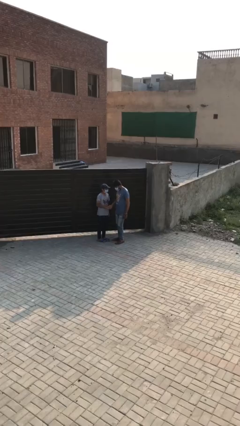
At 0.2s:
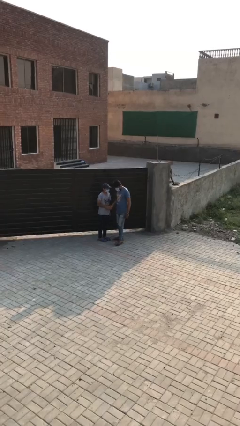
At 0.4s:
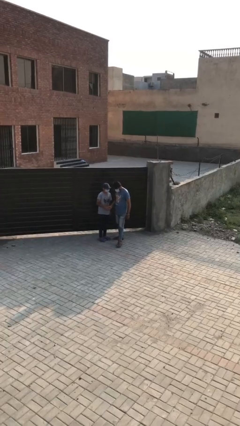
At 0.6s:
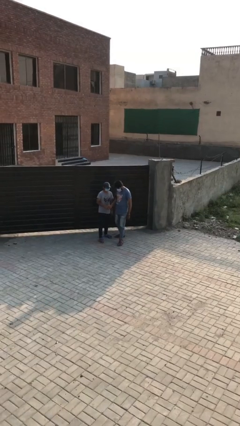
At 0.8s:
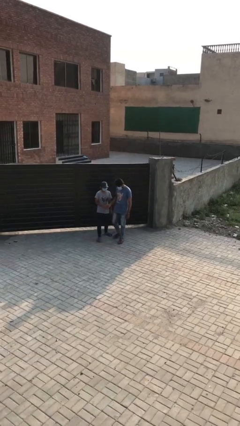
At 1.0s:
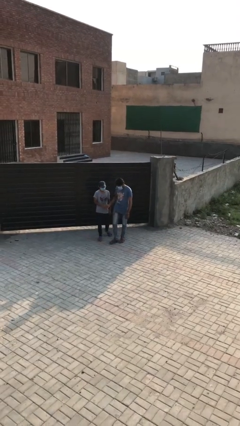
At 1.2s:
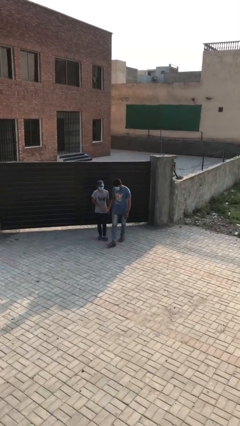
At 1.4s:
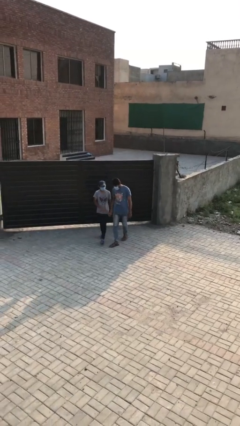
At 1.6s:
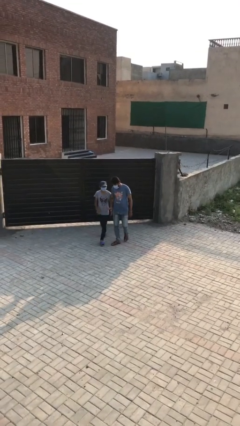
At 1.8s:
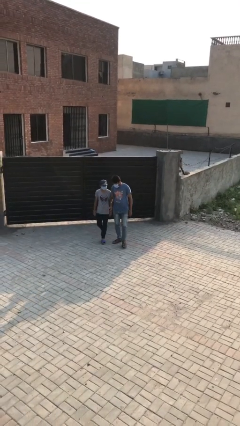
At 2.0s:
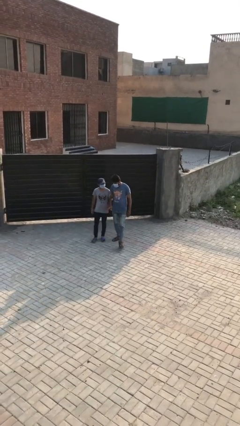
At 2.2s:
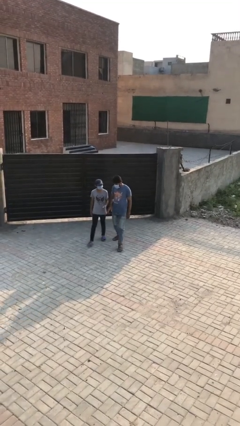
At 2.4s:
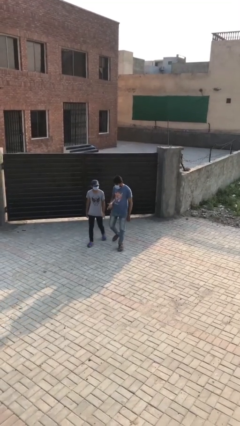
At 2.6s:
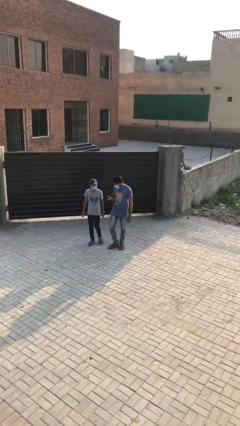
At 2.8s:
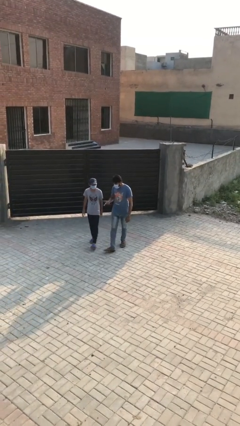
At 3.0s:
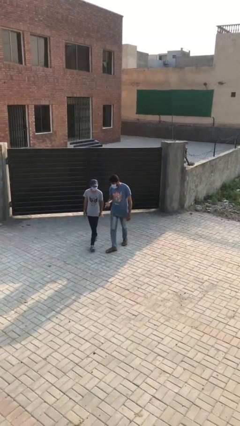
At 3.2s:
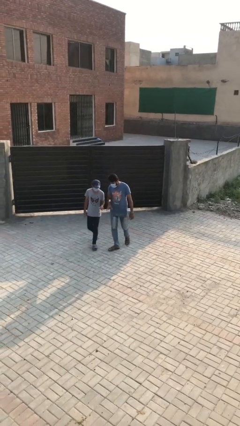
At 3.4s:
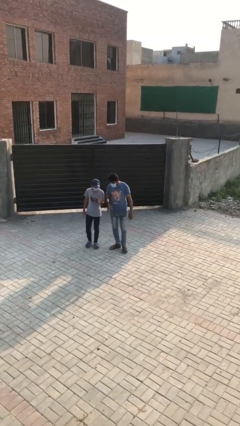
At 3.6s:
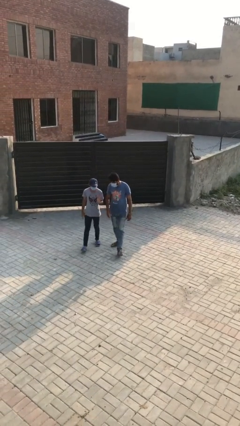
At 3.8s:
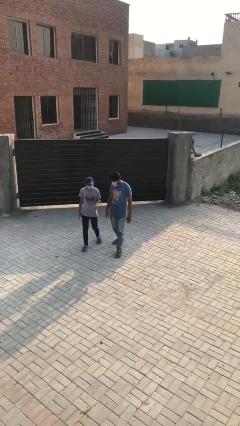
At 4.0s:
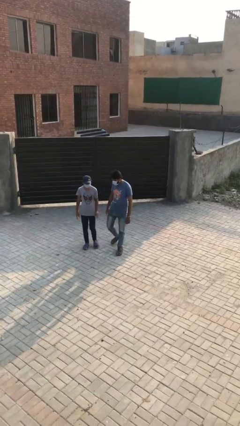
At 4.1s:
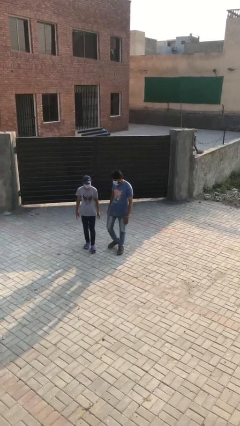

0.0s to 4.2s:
person talks to person

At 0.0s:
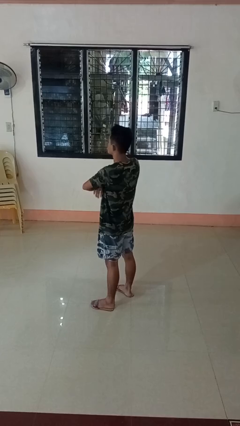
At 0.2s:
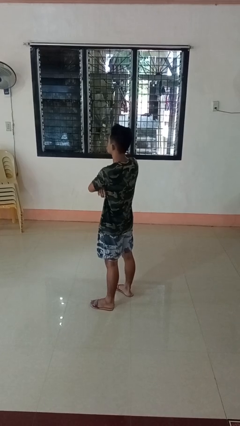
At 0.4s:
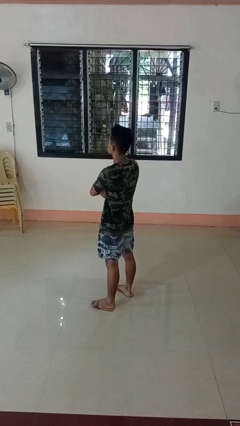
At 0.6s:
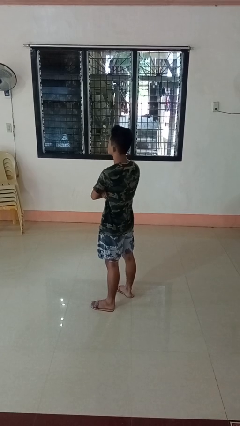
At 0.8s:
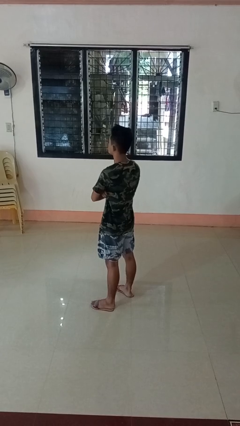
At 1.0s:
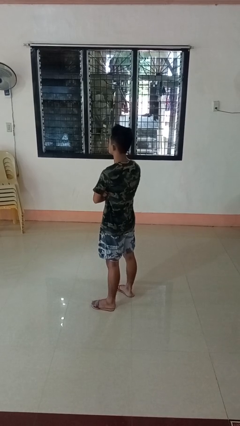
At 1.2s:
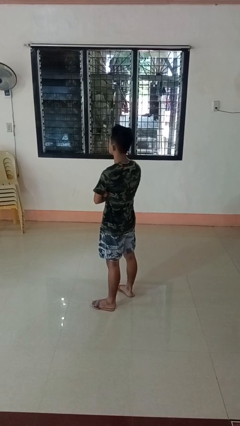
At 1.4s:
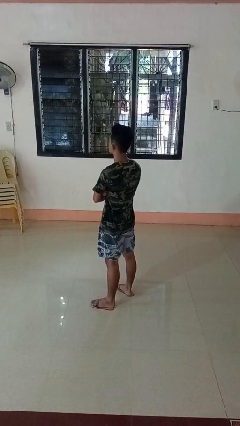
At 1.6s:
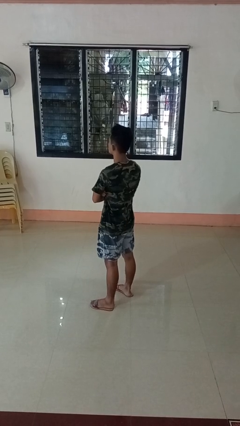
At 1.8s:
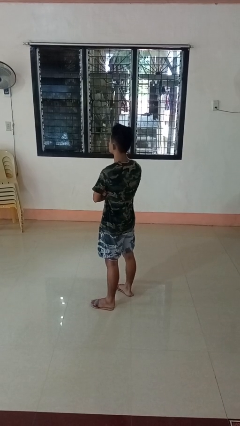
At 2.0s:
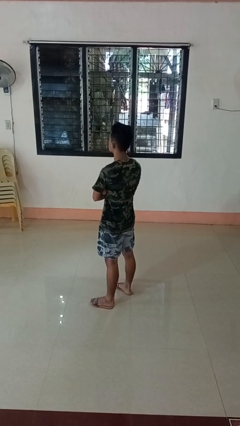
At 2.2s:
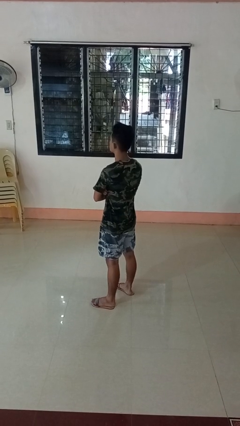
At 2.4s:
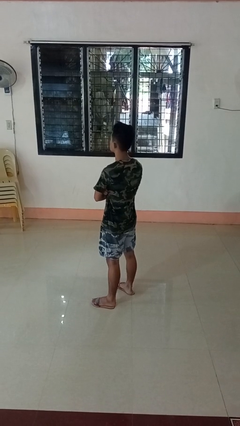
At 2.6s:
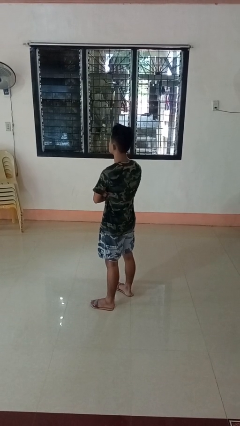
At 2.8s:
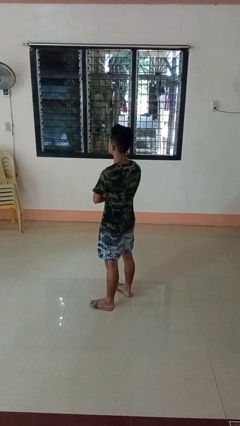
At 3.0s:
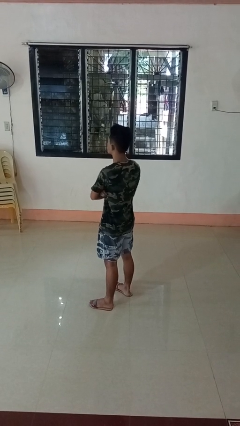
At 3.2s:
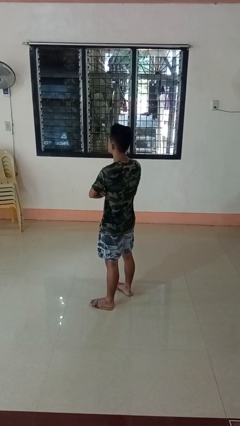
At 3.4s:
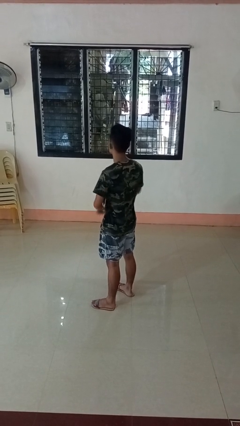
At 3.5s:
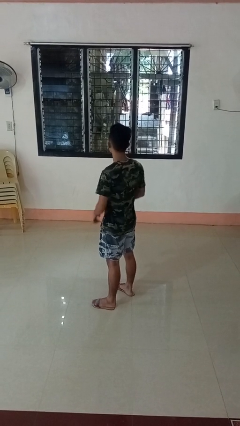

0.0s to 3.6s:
person crosses arms

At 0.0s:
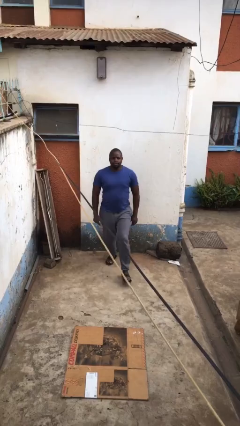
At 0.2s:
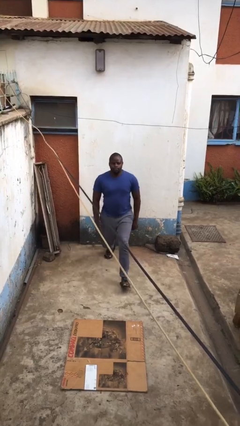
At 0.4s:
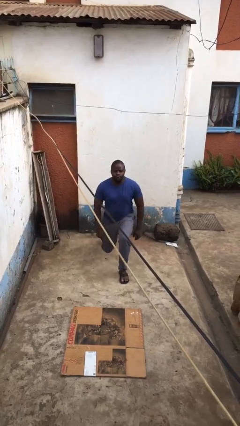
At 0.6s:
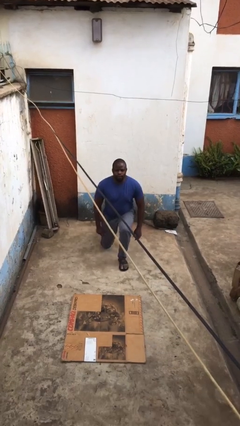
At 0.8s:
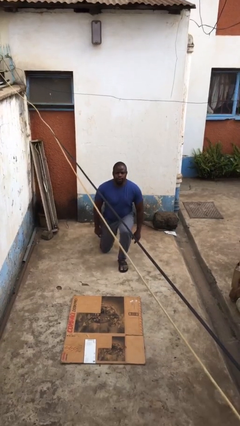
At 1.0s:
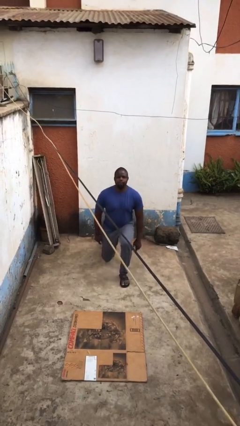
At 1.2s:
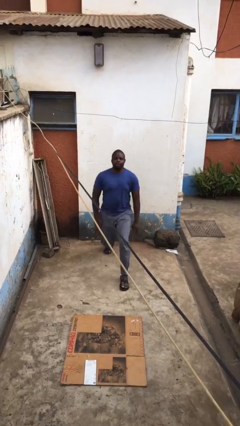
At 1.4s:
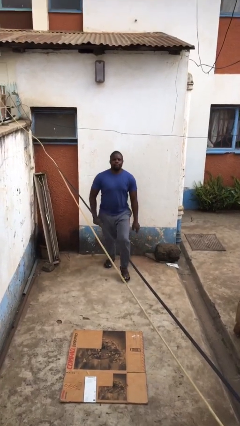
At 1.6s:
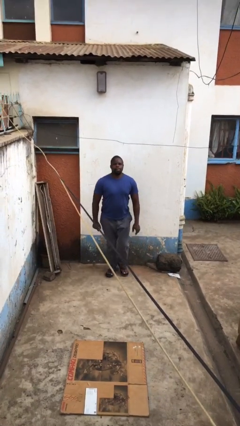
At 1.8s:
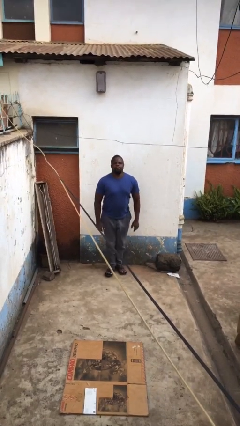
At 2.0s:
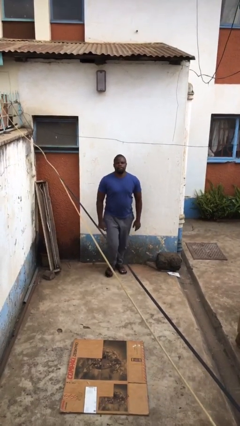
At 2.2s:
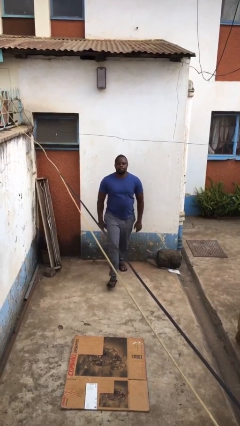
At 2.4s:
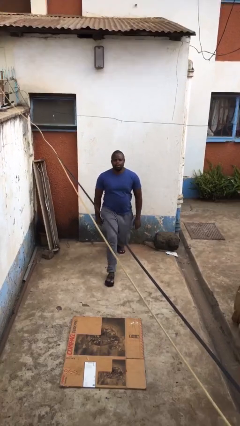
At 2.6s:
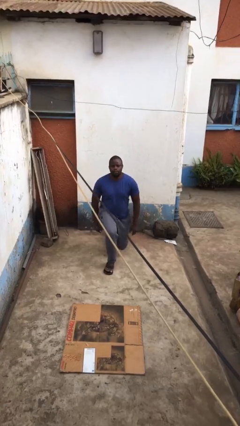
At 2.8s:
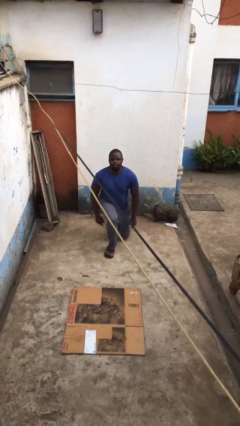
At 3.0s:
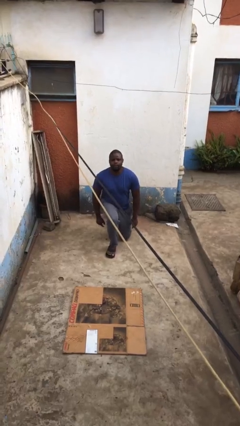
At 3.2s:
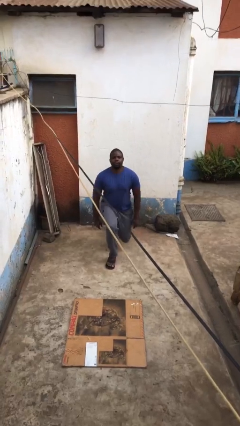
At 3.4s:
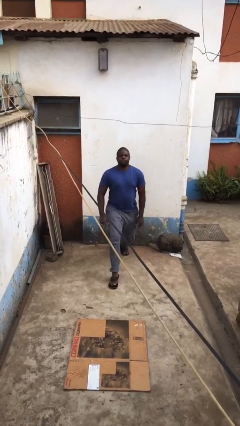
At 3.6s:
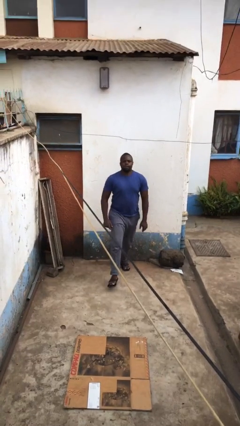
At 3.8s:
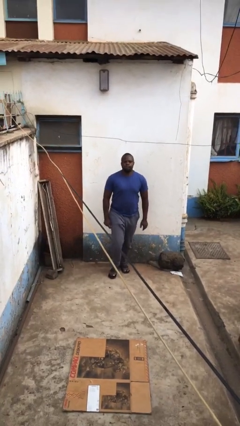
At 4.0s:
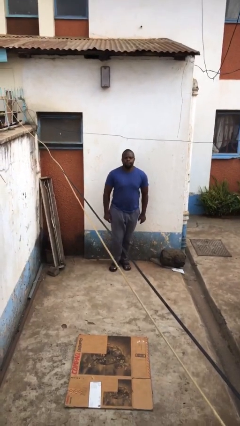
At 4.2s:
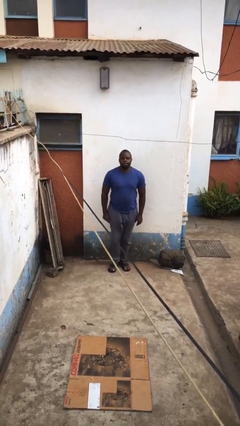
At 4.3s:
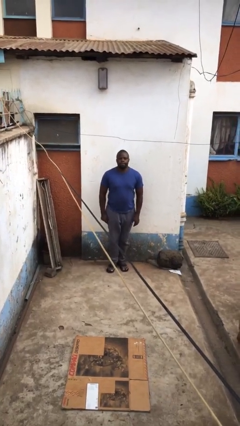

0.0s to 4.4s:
person exercises with lunges

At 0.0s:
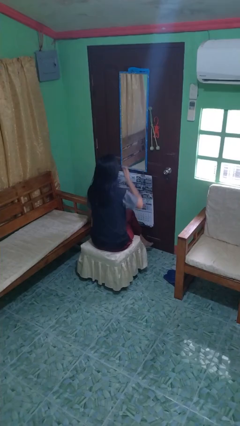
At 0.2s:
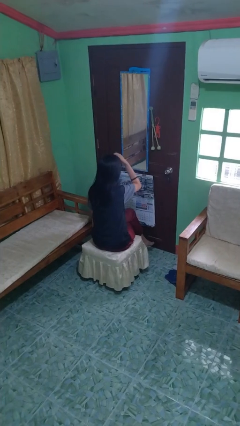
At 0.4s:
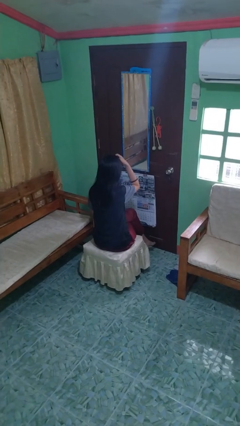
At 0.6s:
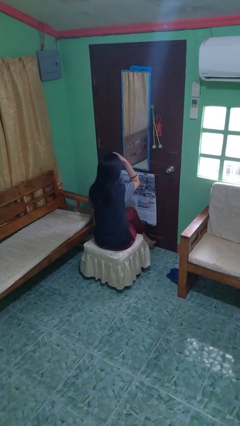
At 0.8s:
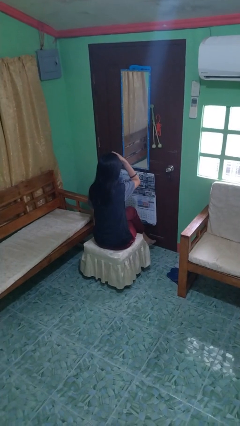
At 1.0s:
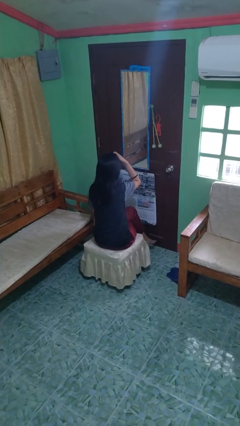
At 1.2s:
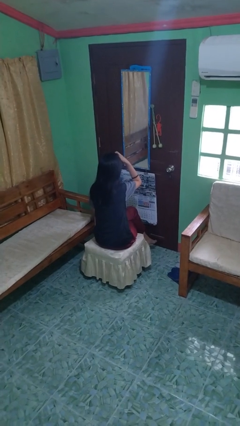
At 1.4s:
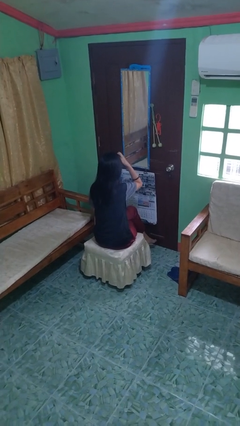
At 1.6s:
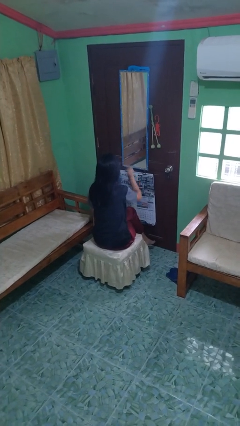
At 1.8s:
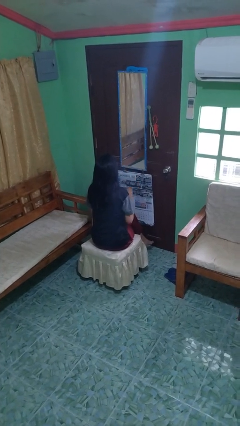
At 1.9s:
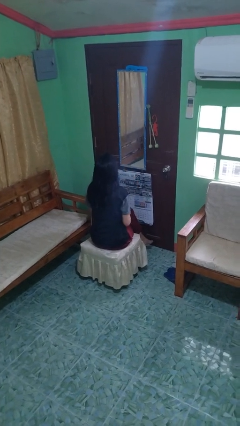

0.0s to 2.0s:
person scratches face

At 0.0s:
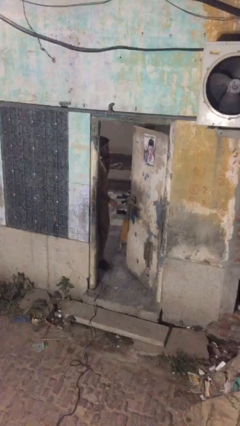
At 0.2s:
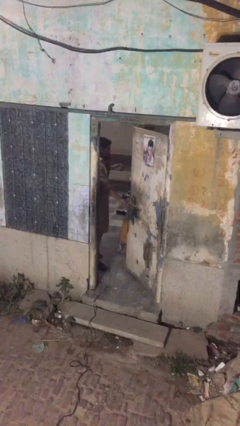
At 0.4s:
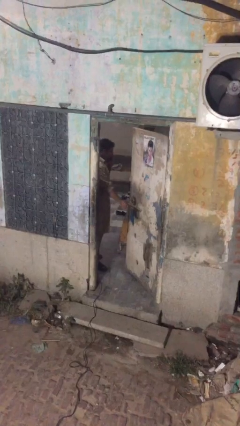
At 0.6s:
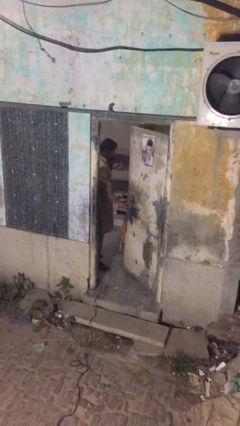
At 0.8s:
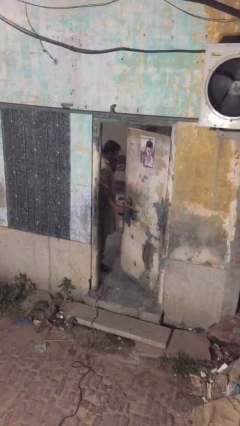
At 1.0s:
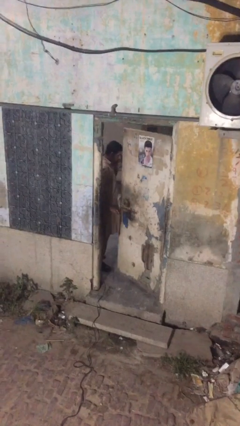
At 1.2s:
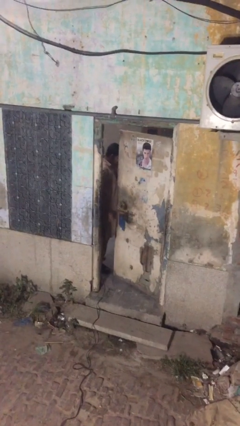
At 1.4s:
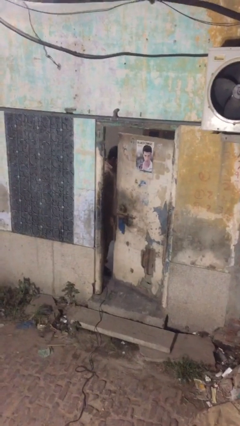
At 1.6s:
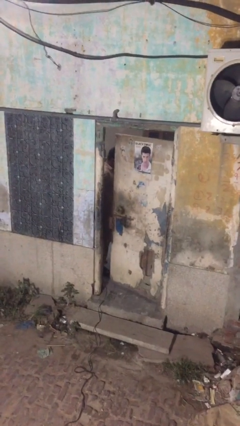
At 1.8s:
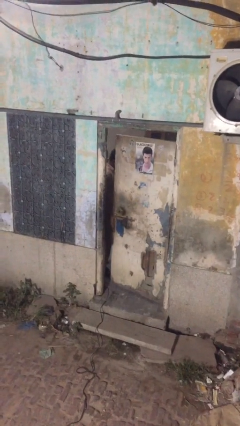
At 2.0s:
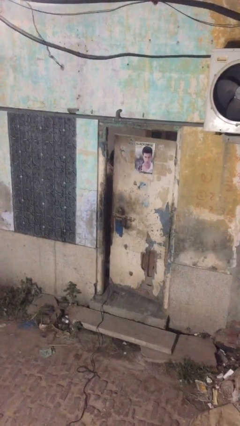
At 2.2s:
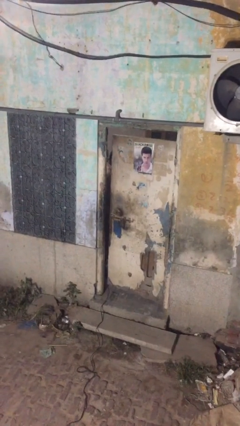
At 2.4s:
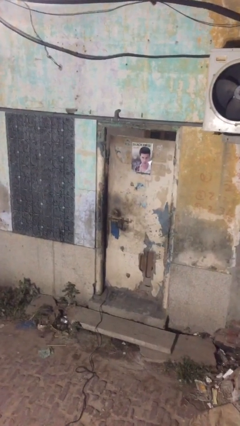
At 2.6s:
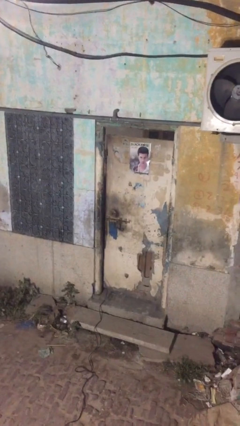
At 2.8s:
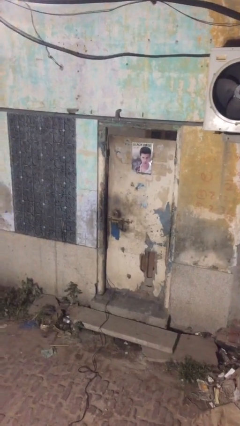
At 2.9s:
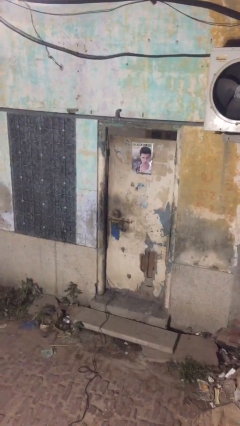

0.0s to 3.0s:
person closes facility door

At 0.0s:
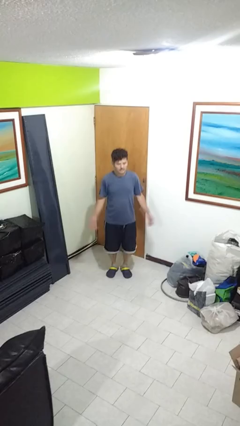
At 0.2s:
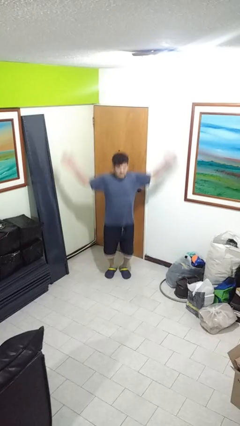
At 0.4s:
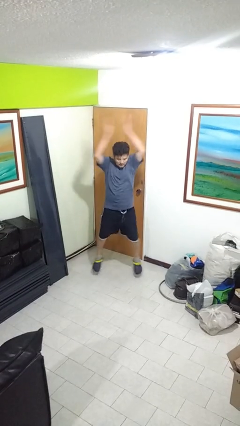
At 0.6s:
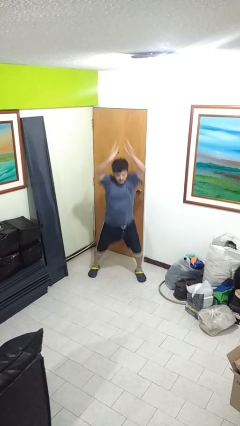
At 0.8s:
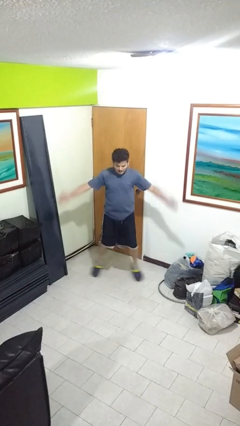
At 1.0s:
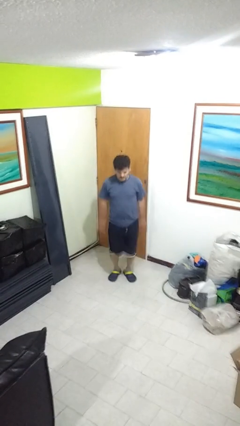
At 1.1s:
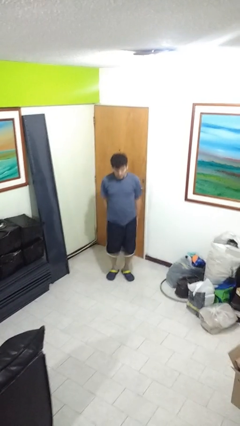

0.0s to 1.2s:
person exercises with jumping jacks
